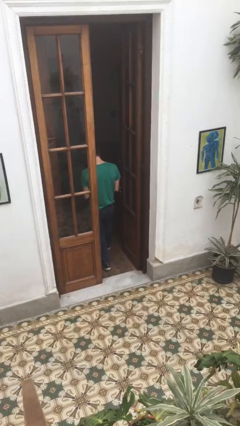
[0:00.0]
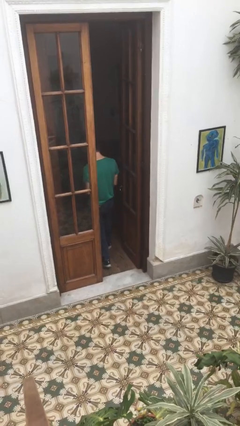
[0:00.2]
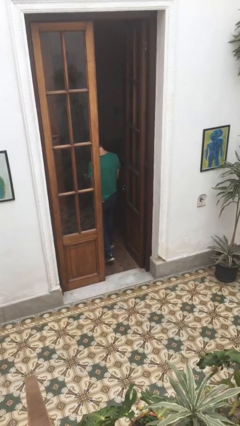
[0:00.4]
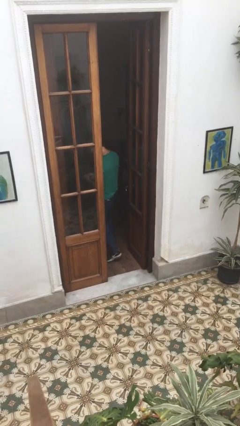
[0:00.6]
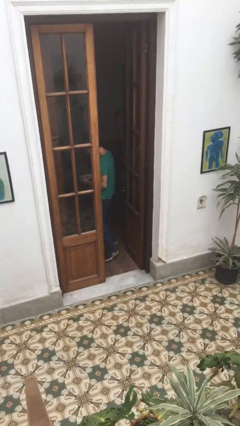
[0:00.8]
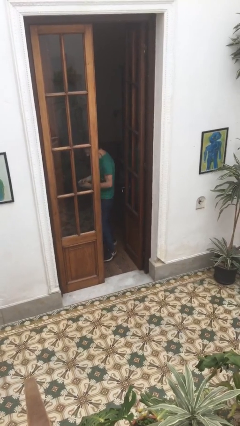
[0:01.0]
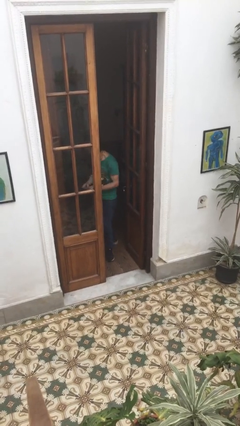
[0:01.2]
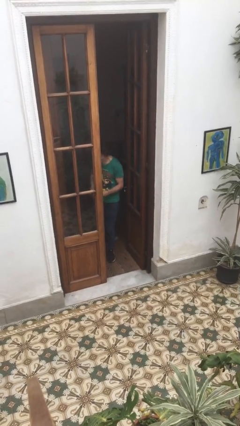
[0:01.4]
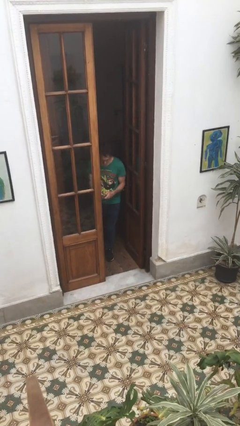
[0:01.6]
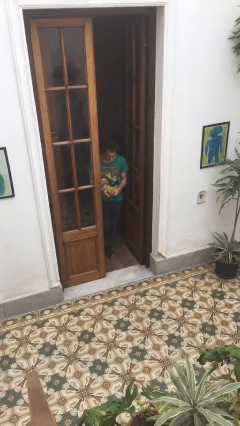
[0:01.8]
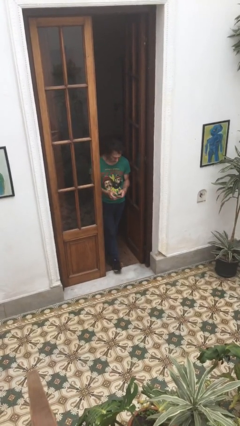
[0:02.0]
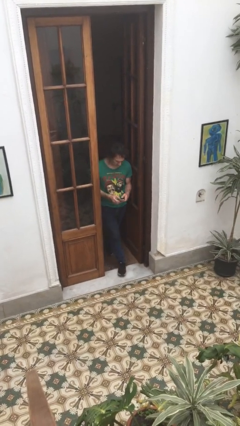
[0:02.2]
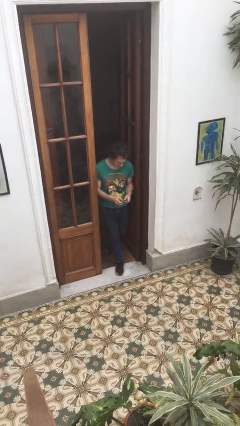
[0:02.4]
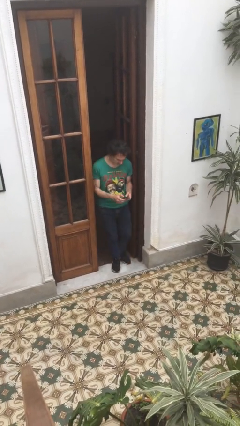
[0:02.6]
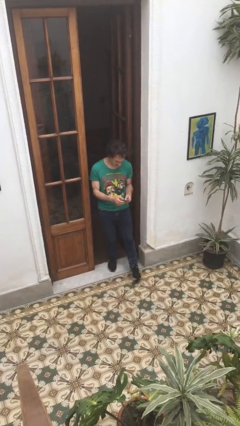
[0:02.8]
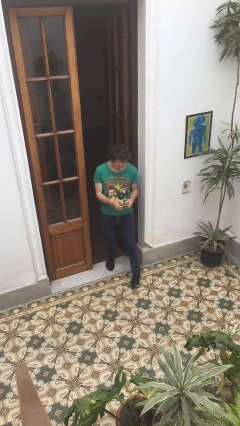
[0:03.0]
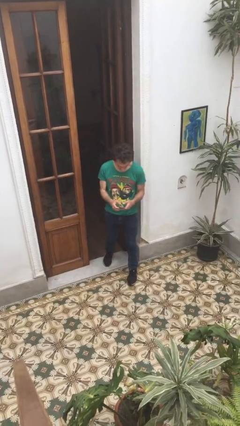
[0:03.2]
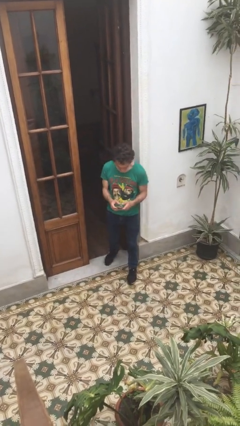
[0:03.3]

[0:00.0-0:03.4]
person enters scene through structure

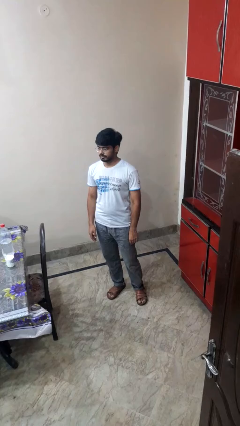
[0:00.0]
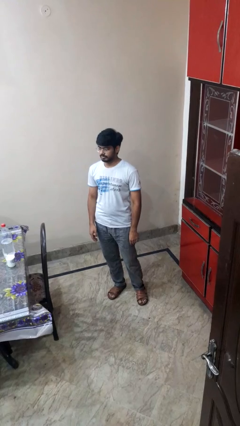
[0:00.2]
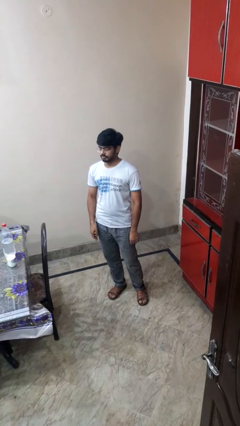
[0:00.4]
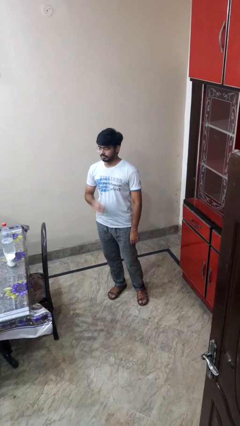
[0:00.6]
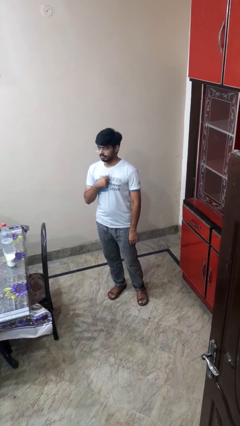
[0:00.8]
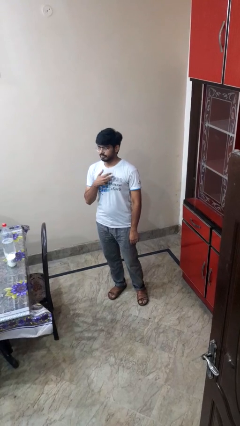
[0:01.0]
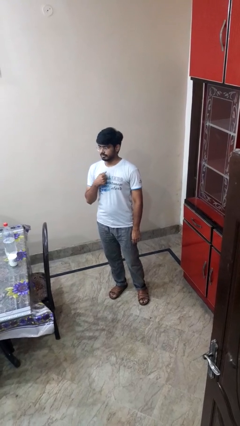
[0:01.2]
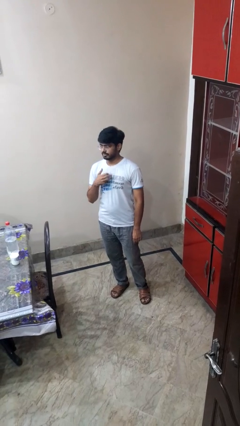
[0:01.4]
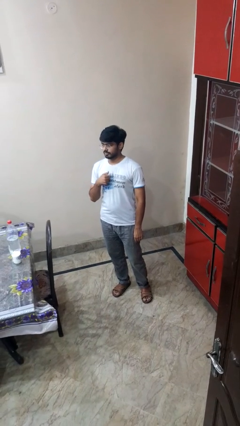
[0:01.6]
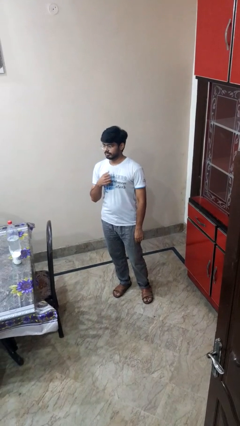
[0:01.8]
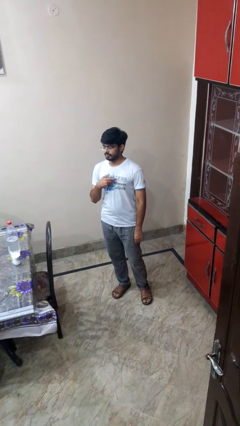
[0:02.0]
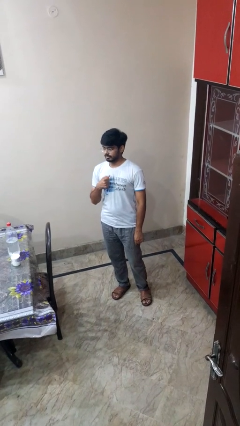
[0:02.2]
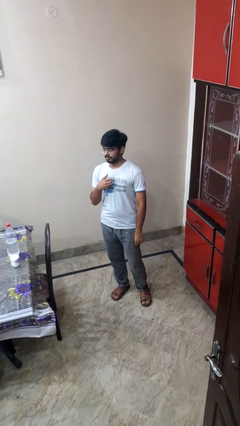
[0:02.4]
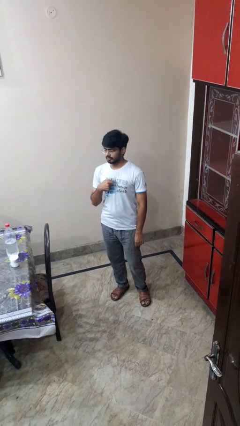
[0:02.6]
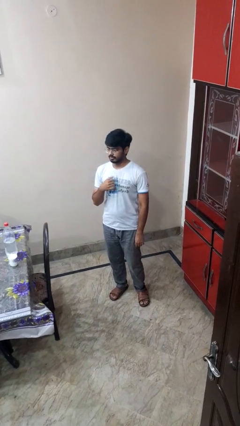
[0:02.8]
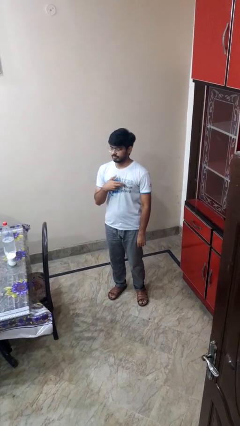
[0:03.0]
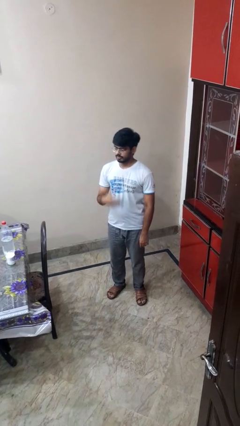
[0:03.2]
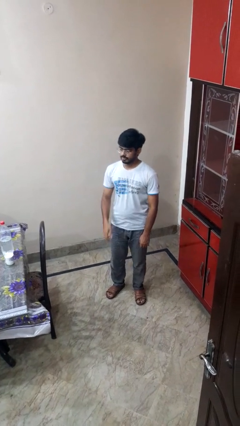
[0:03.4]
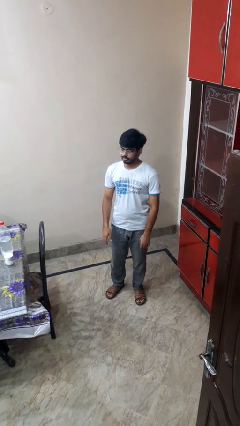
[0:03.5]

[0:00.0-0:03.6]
person drums on chest

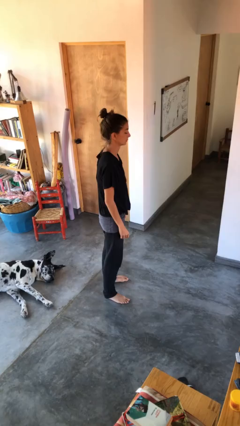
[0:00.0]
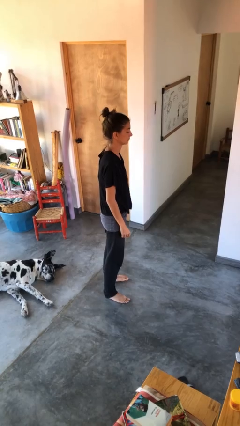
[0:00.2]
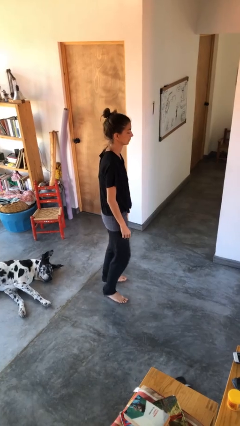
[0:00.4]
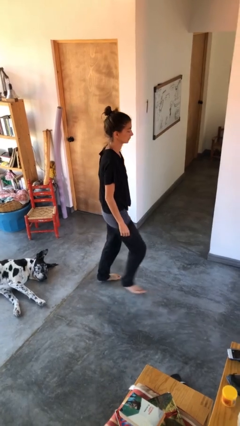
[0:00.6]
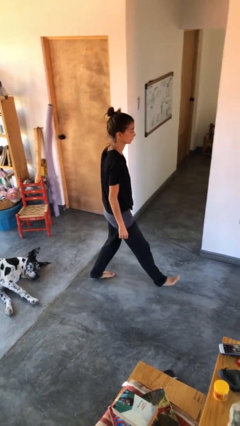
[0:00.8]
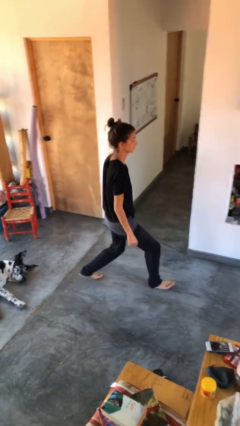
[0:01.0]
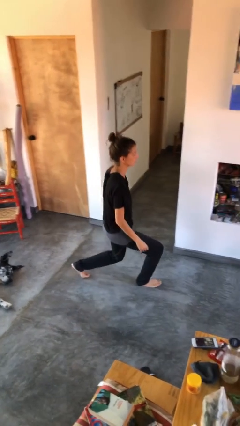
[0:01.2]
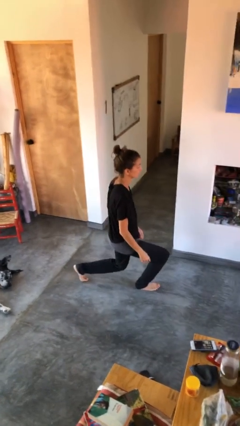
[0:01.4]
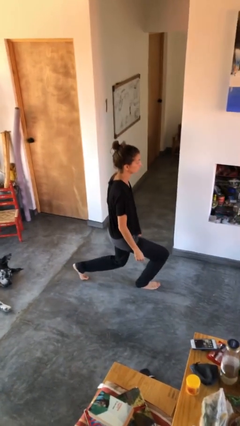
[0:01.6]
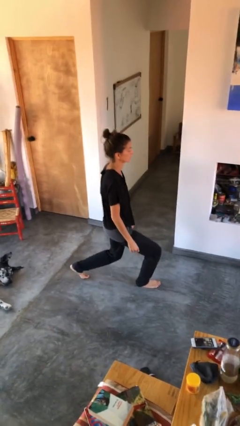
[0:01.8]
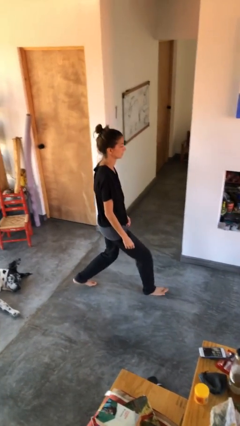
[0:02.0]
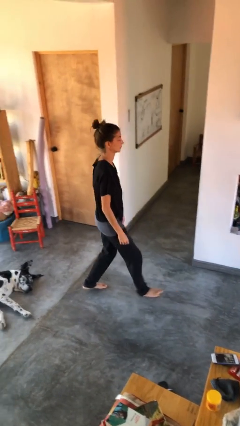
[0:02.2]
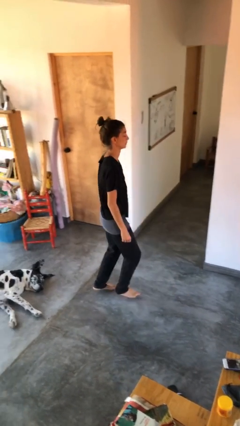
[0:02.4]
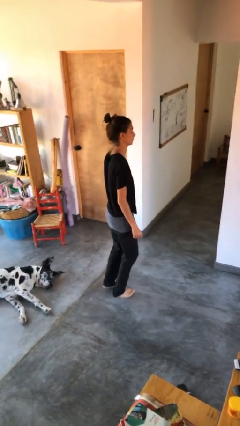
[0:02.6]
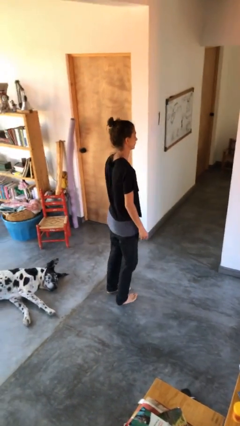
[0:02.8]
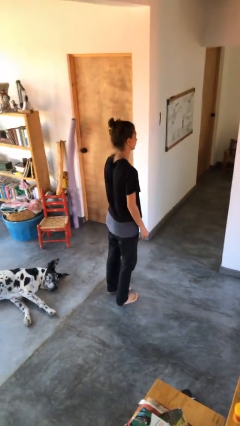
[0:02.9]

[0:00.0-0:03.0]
person exercises with lunges

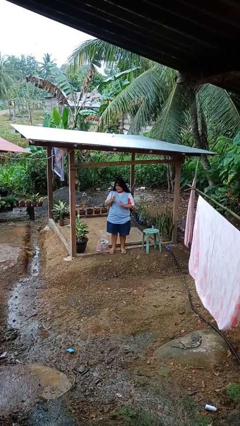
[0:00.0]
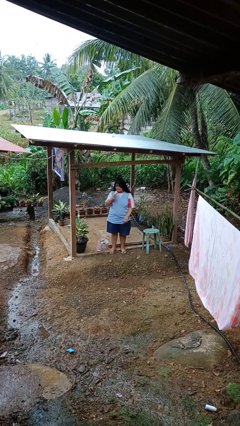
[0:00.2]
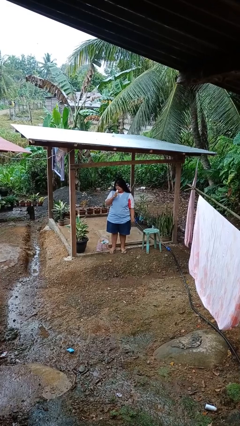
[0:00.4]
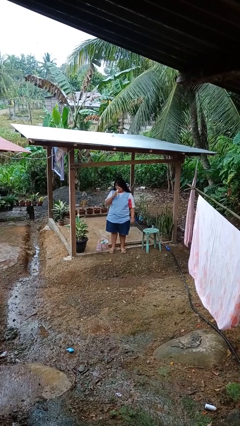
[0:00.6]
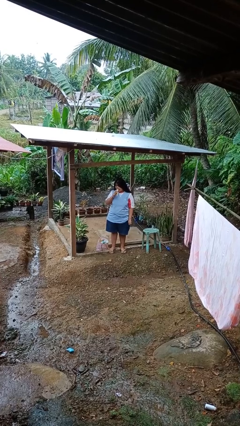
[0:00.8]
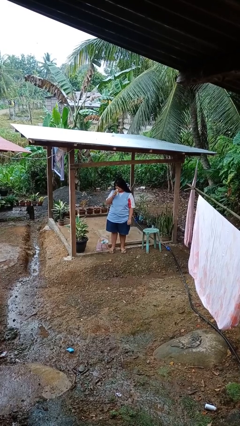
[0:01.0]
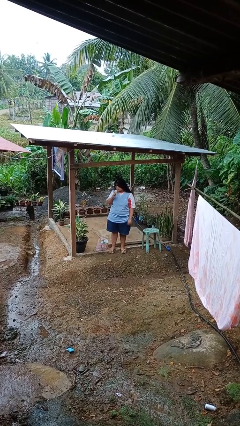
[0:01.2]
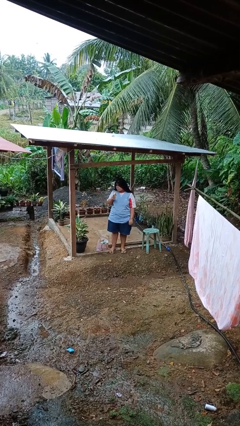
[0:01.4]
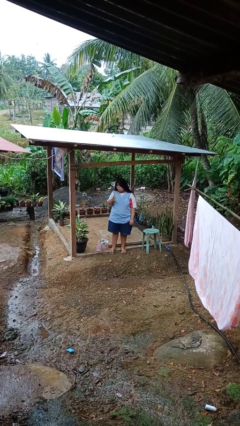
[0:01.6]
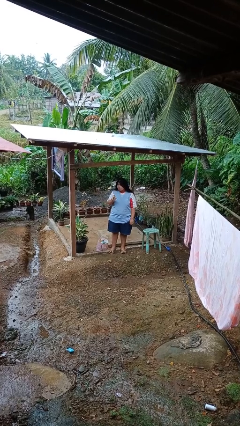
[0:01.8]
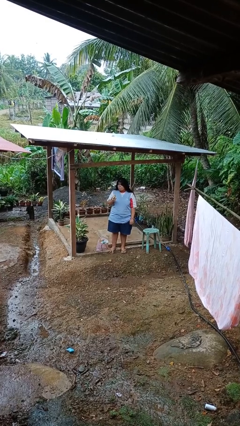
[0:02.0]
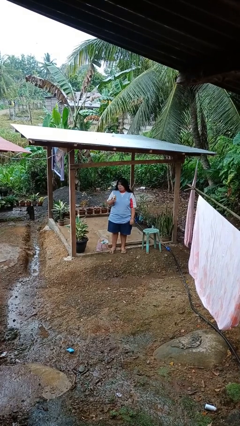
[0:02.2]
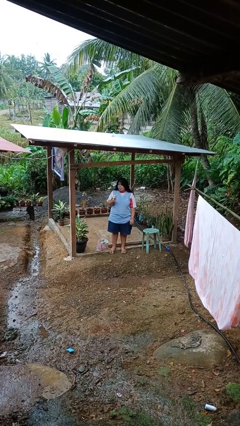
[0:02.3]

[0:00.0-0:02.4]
person eats banana

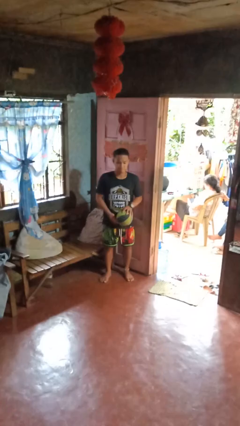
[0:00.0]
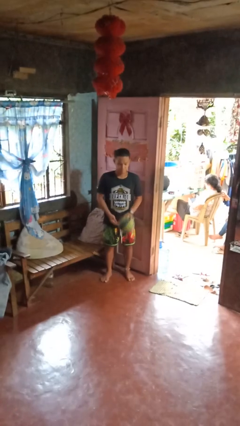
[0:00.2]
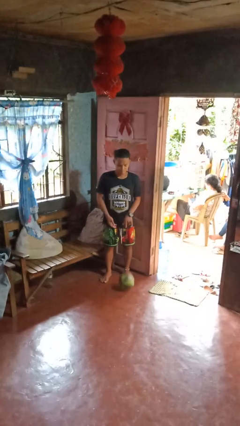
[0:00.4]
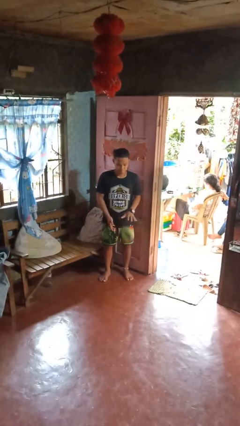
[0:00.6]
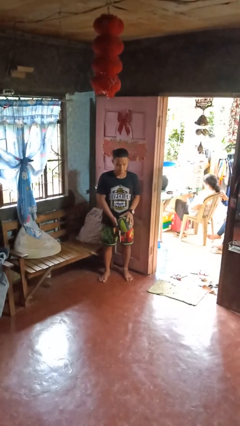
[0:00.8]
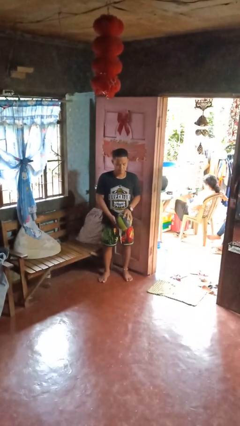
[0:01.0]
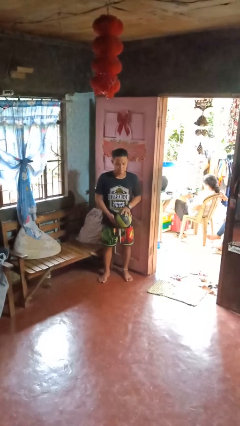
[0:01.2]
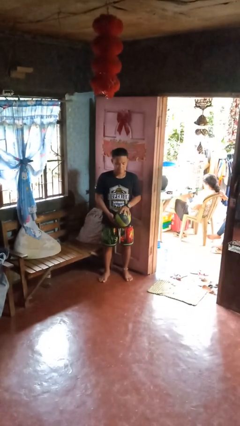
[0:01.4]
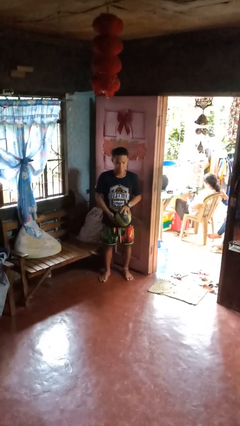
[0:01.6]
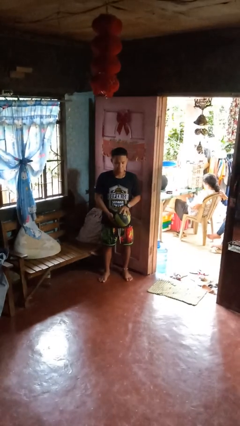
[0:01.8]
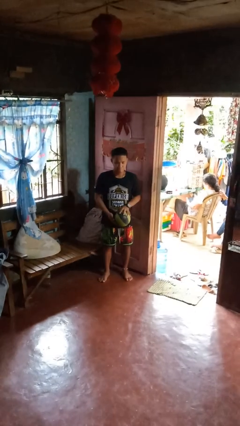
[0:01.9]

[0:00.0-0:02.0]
person bounces ball on floor

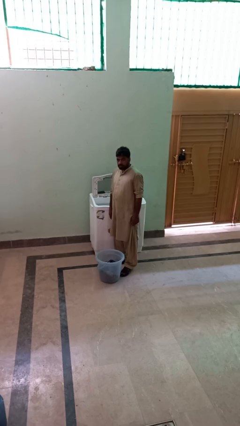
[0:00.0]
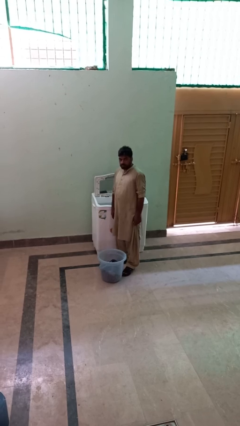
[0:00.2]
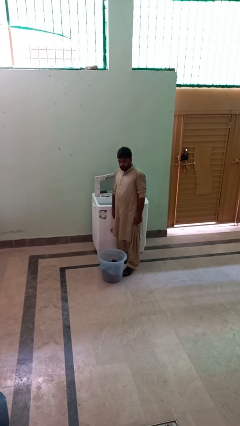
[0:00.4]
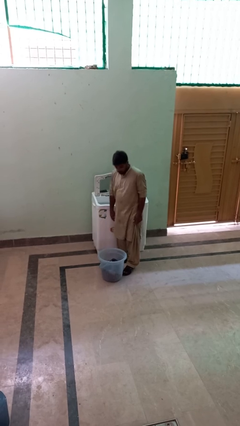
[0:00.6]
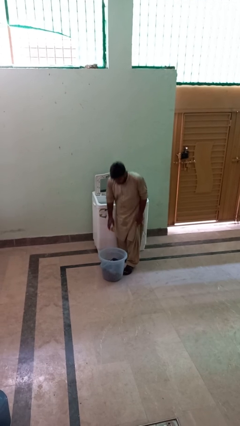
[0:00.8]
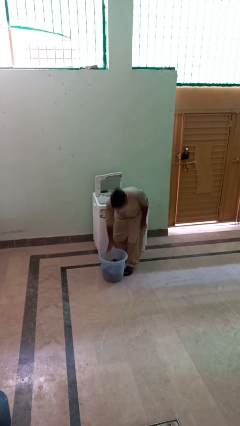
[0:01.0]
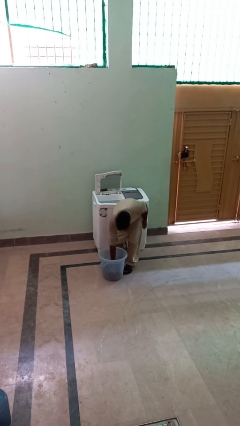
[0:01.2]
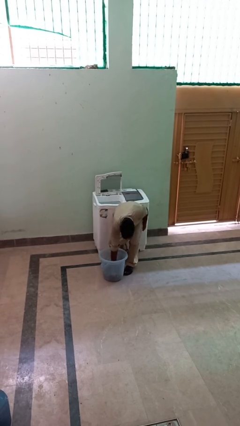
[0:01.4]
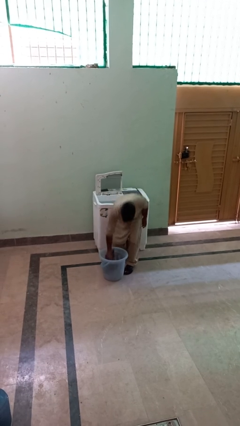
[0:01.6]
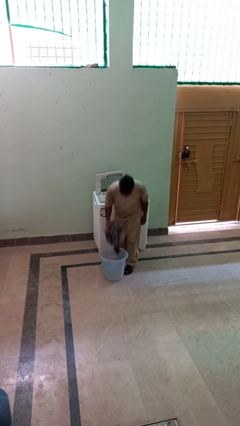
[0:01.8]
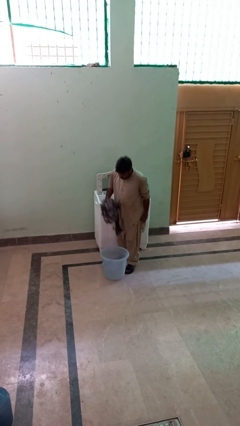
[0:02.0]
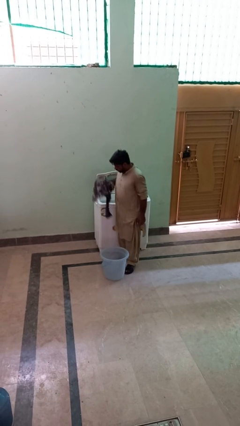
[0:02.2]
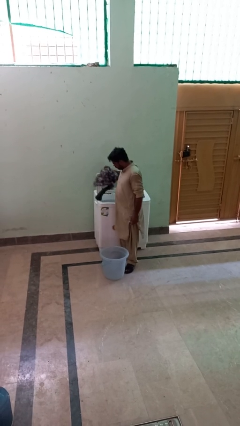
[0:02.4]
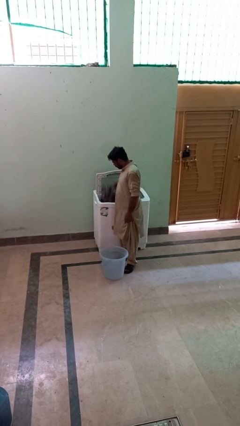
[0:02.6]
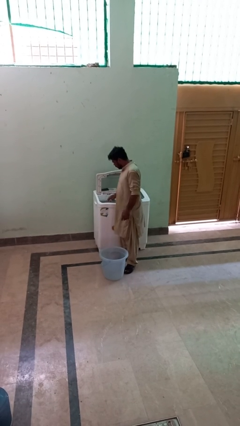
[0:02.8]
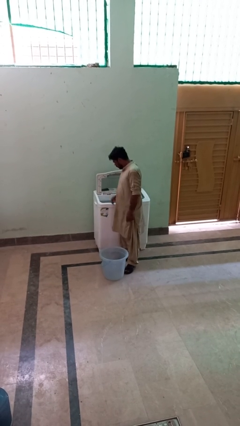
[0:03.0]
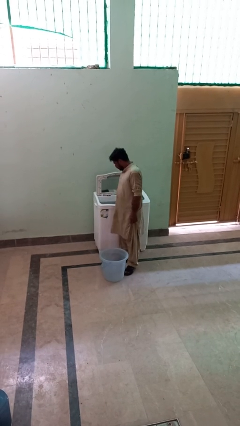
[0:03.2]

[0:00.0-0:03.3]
person loads clotheswasher
